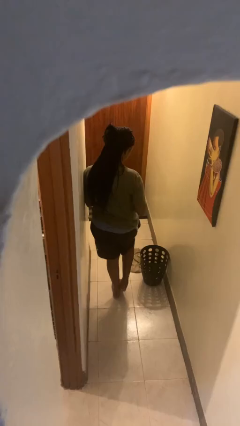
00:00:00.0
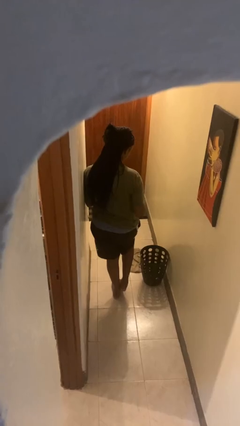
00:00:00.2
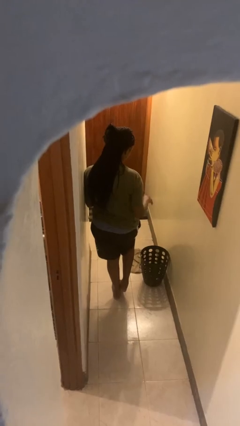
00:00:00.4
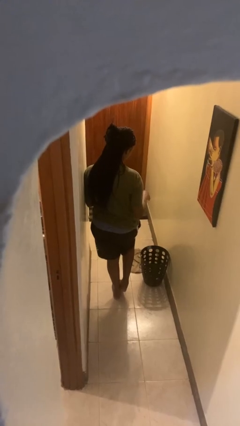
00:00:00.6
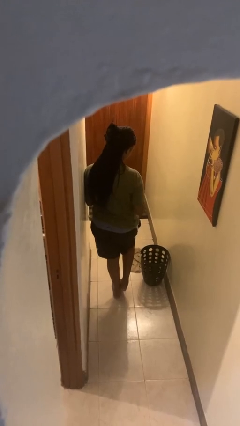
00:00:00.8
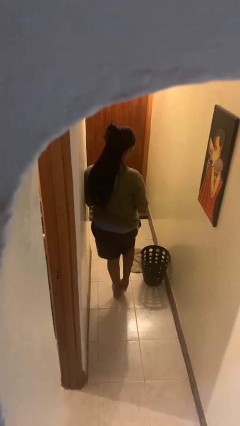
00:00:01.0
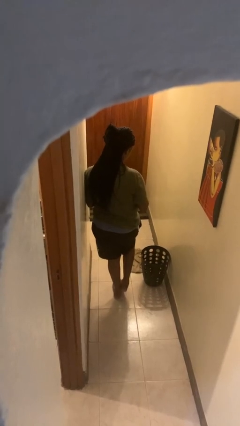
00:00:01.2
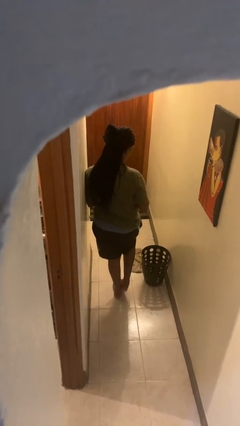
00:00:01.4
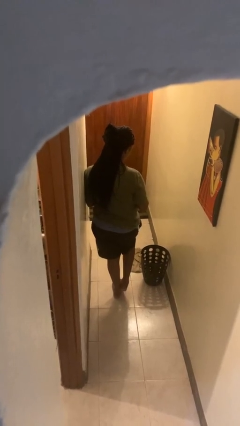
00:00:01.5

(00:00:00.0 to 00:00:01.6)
person discards trash

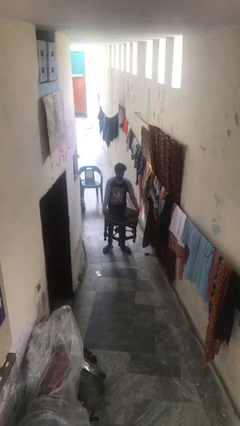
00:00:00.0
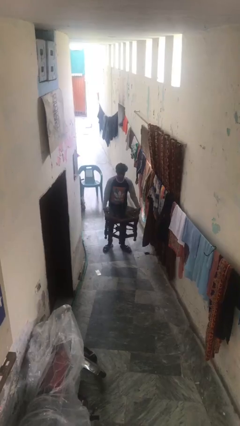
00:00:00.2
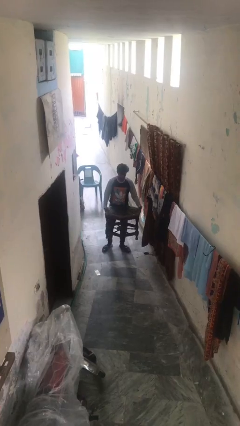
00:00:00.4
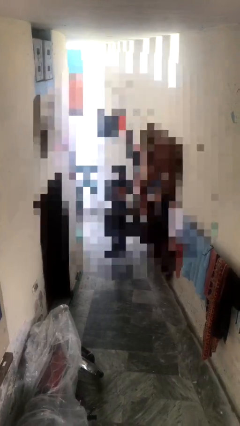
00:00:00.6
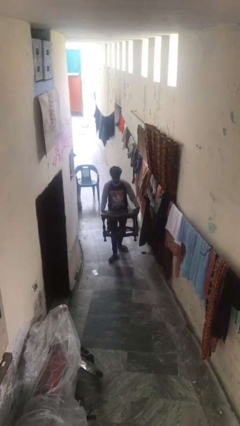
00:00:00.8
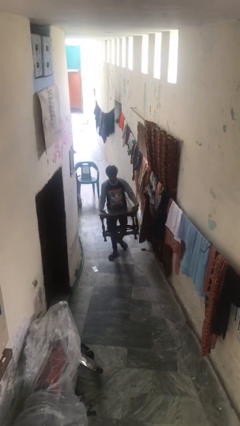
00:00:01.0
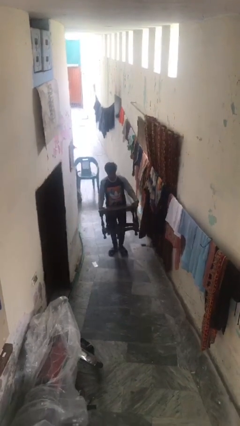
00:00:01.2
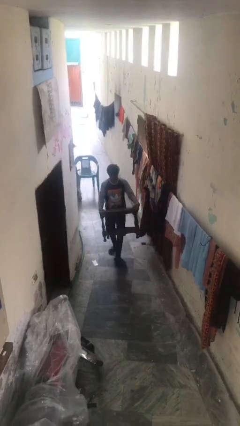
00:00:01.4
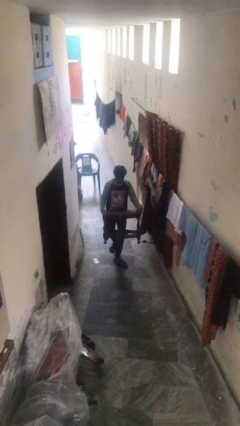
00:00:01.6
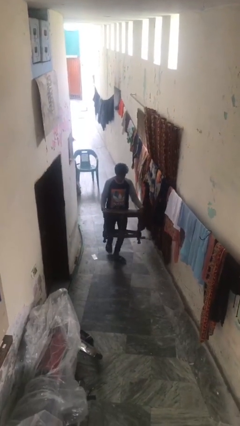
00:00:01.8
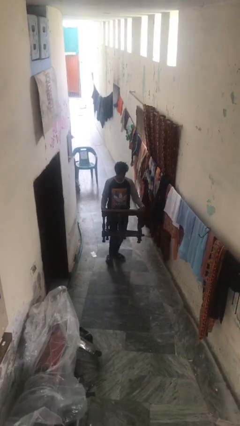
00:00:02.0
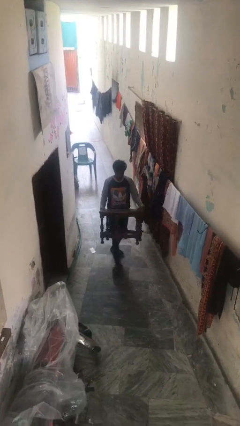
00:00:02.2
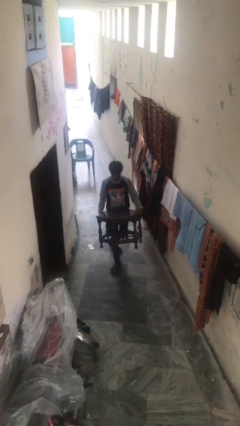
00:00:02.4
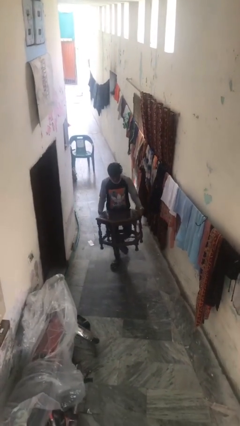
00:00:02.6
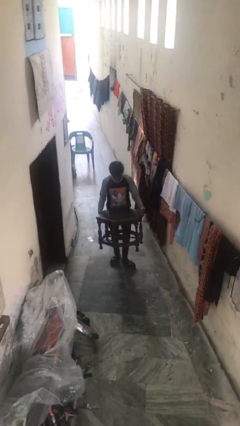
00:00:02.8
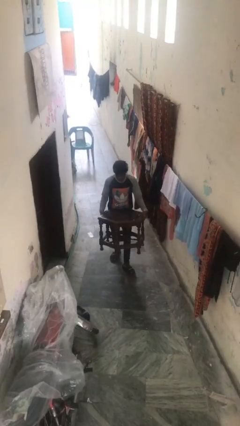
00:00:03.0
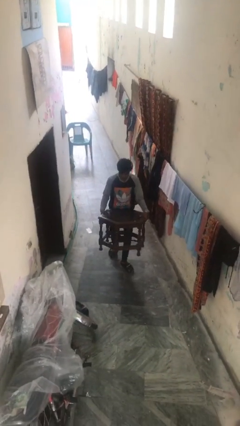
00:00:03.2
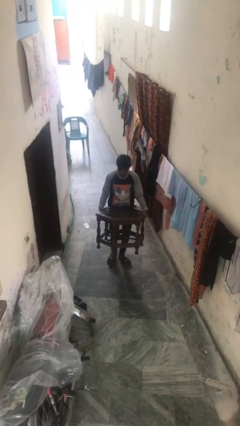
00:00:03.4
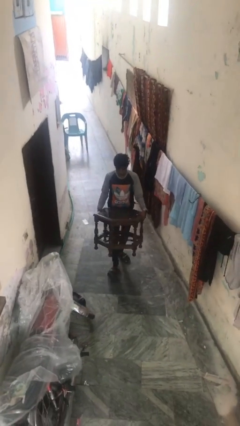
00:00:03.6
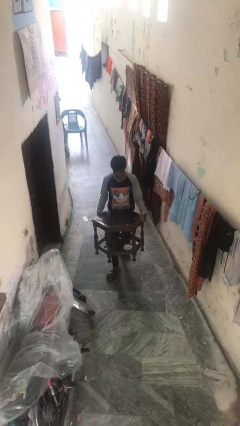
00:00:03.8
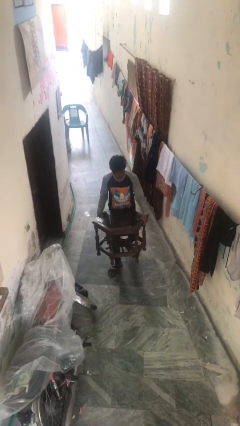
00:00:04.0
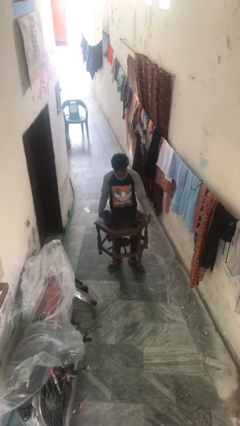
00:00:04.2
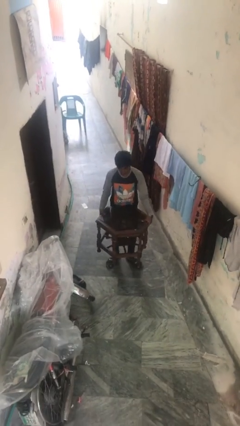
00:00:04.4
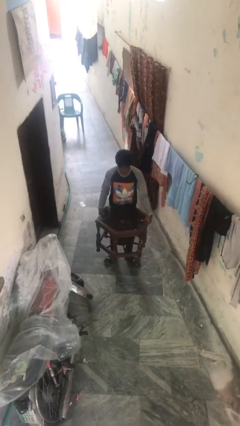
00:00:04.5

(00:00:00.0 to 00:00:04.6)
person carries heavy object

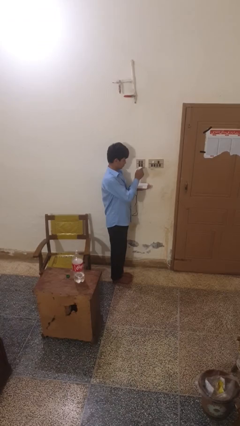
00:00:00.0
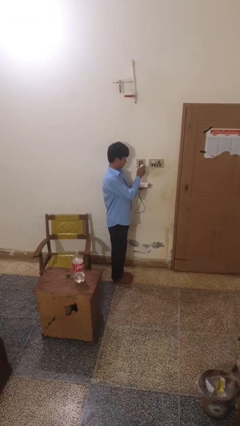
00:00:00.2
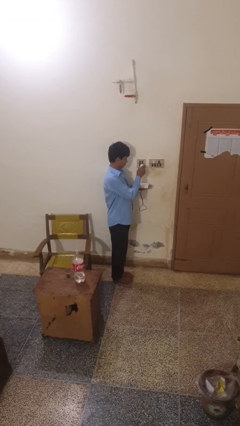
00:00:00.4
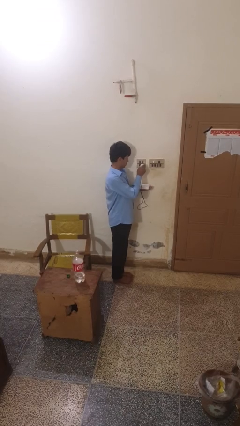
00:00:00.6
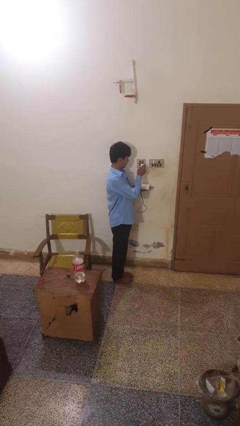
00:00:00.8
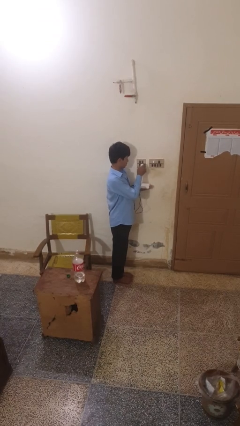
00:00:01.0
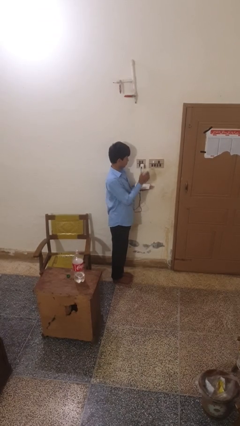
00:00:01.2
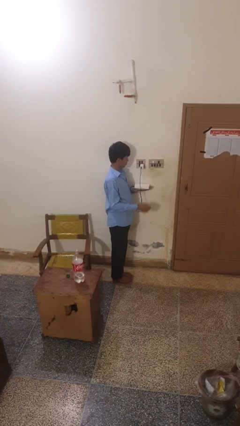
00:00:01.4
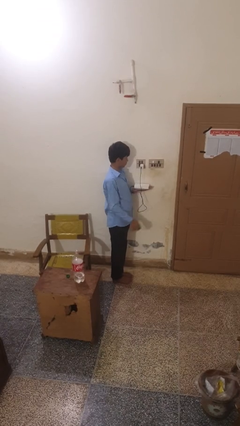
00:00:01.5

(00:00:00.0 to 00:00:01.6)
person plugs into electrical socket

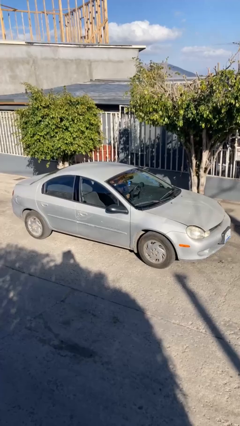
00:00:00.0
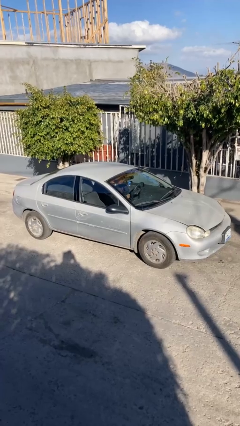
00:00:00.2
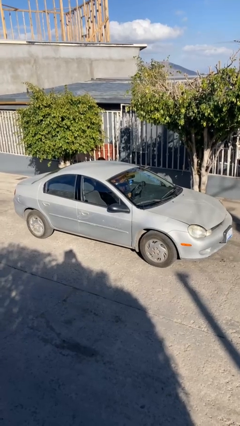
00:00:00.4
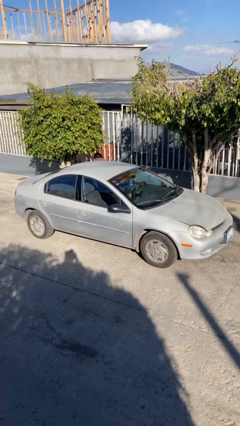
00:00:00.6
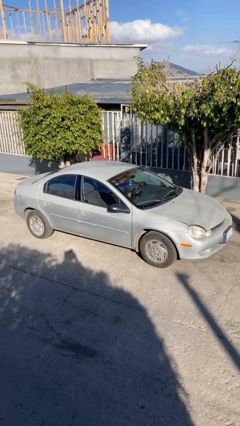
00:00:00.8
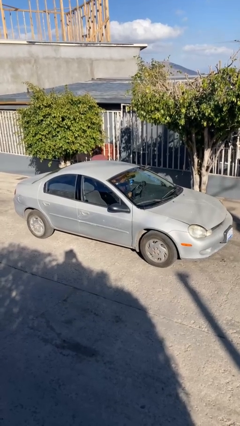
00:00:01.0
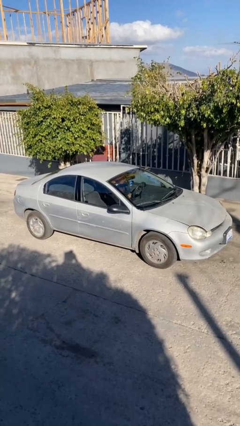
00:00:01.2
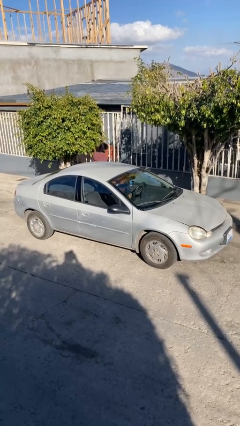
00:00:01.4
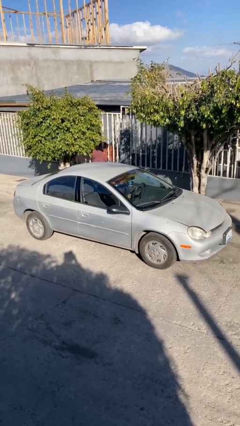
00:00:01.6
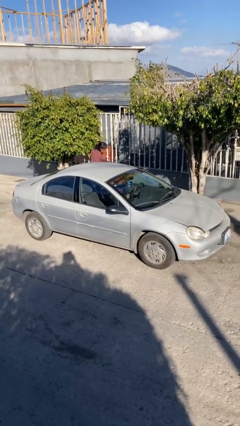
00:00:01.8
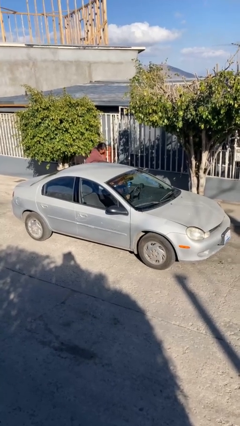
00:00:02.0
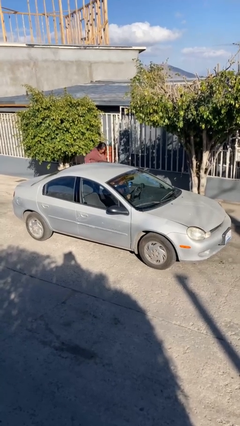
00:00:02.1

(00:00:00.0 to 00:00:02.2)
car drops off person

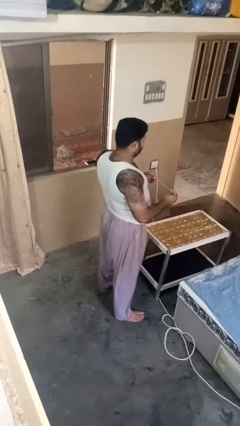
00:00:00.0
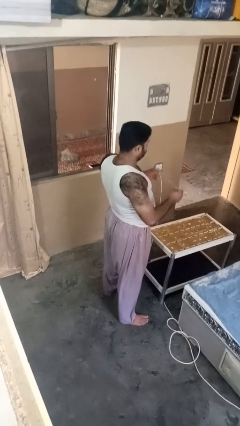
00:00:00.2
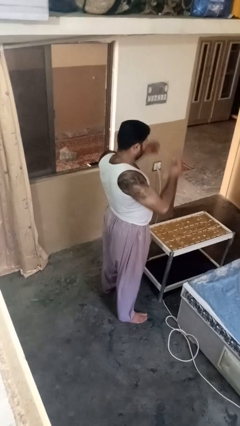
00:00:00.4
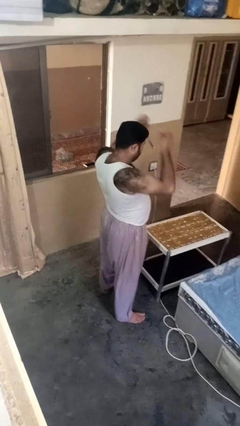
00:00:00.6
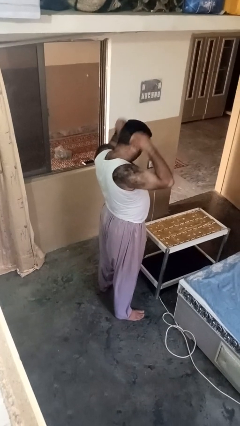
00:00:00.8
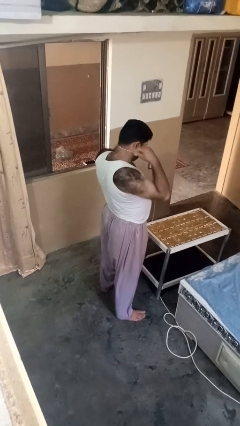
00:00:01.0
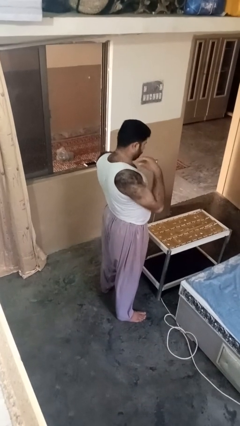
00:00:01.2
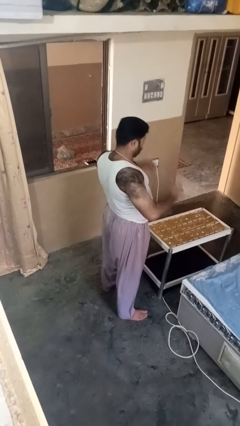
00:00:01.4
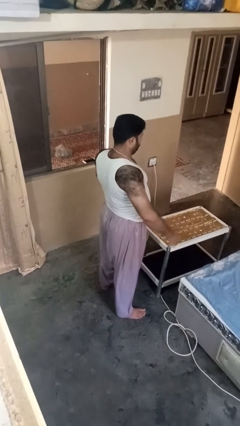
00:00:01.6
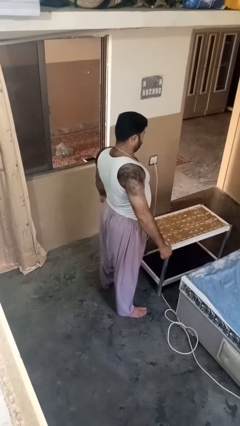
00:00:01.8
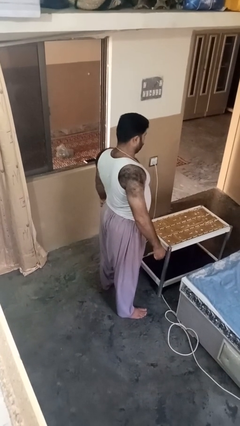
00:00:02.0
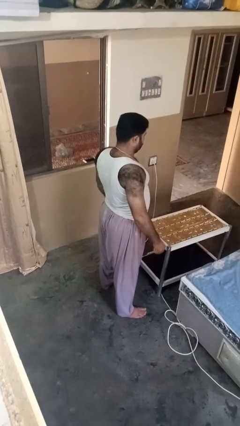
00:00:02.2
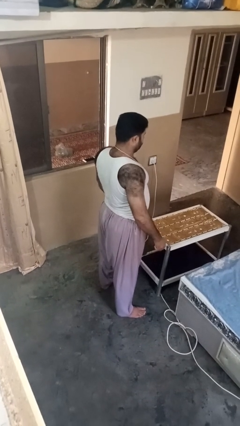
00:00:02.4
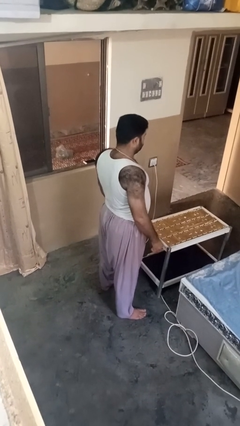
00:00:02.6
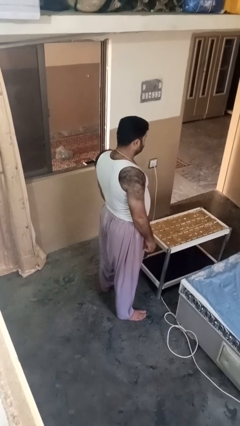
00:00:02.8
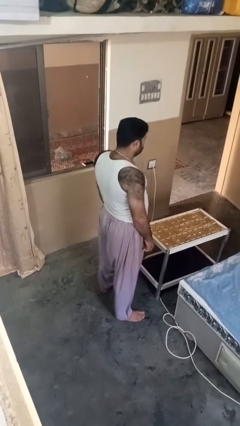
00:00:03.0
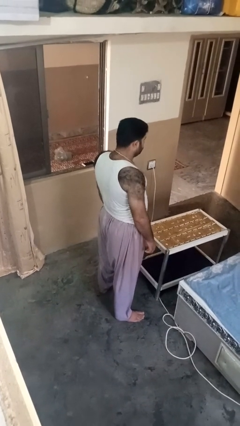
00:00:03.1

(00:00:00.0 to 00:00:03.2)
person puts on necklace

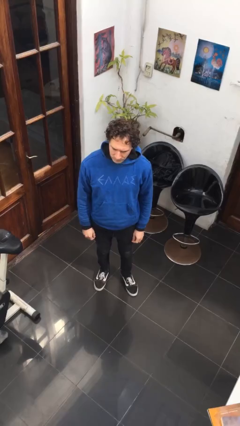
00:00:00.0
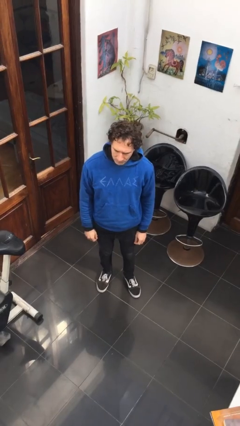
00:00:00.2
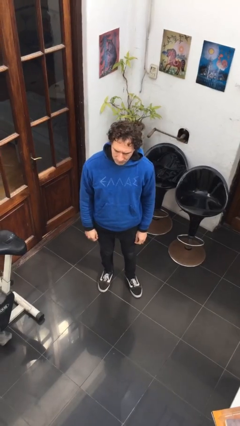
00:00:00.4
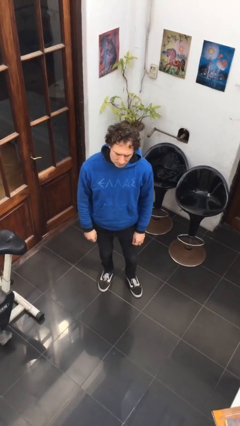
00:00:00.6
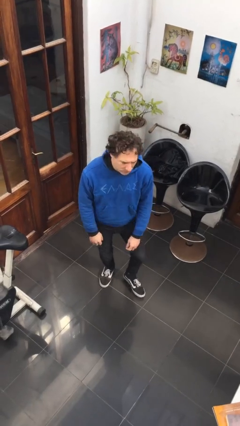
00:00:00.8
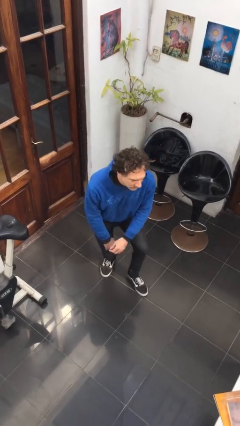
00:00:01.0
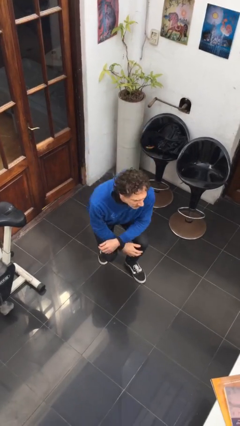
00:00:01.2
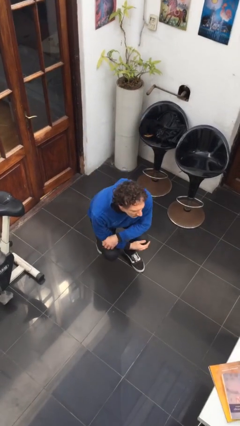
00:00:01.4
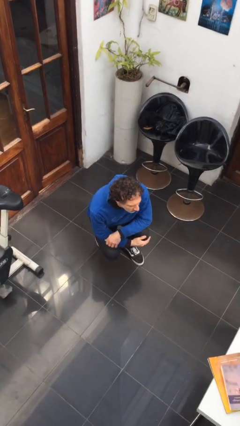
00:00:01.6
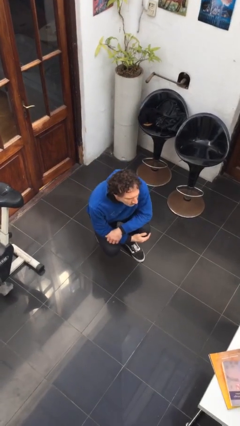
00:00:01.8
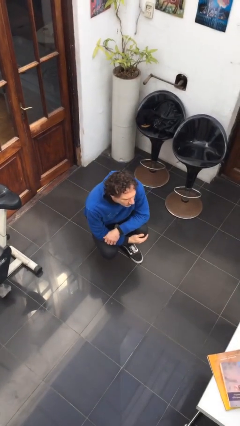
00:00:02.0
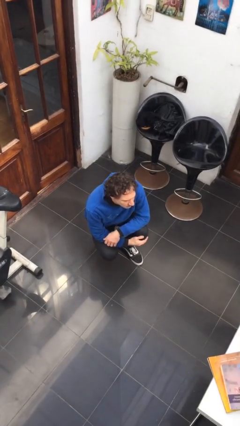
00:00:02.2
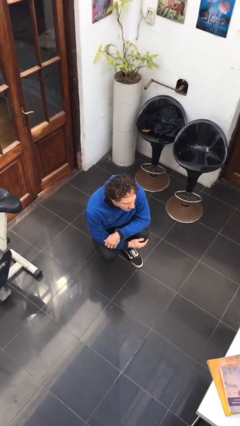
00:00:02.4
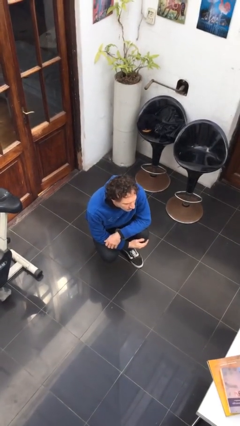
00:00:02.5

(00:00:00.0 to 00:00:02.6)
person squats

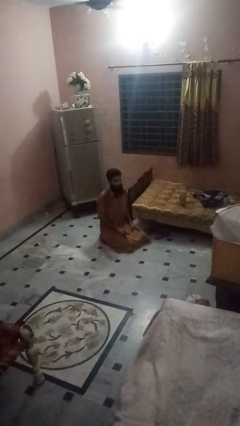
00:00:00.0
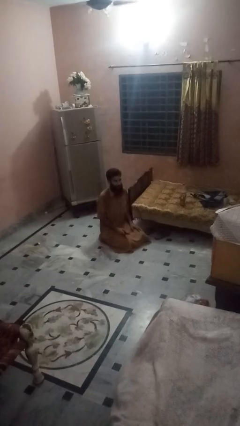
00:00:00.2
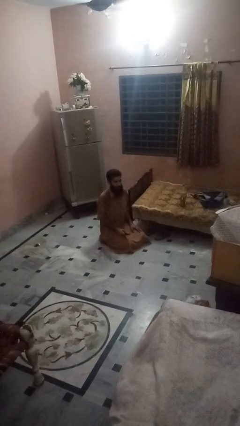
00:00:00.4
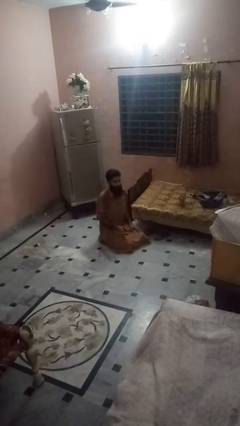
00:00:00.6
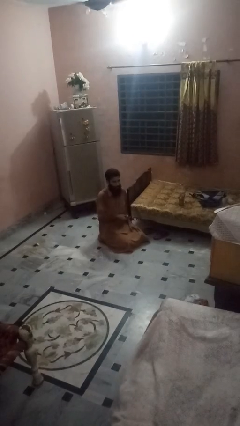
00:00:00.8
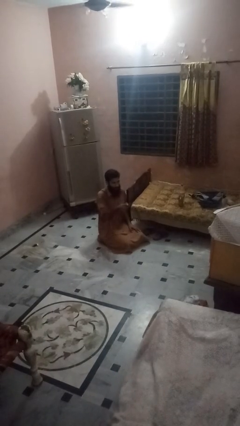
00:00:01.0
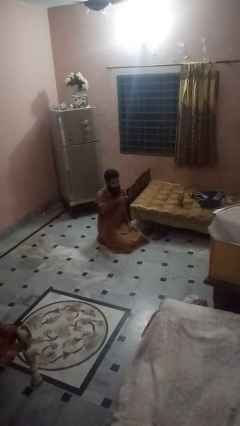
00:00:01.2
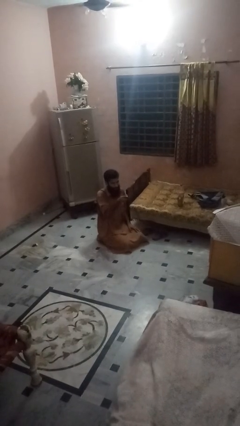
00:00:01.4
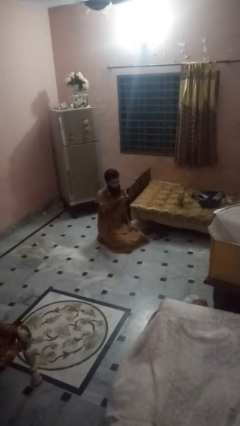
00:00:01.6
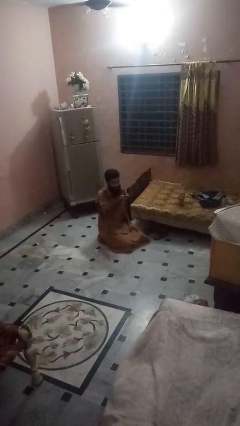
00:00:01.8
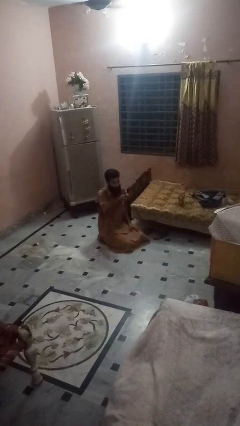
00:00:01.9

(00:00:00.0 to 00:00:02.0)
person uses television remote
